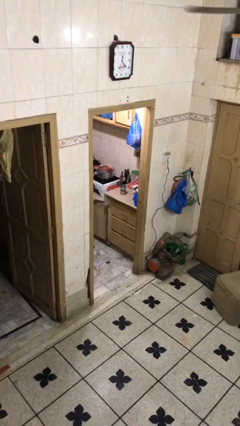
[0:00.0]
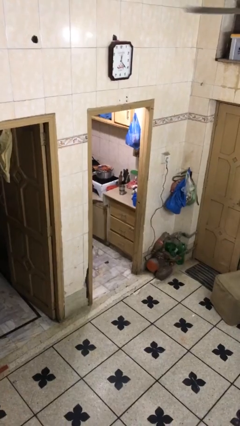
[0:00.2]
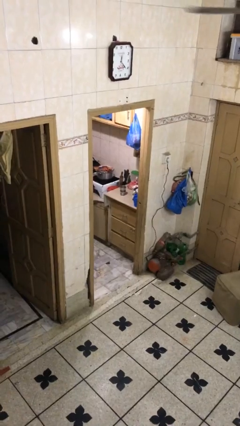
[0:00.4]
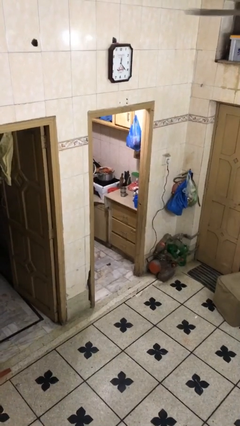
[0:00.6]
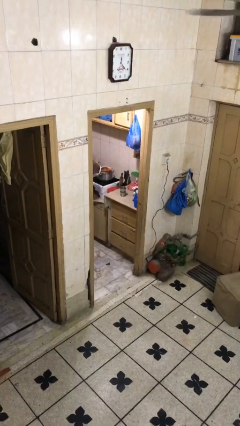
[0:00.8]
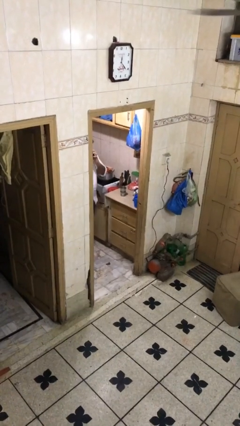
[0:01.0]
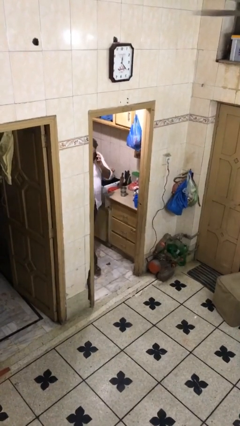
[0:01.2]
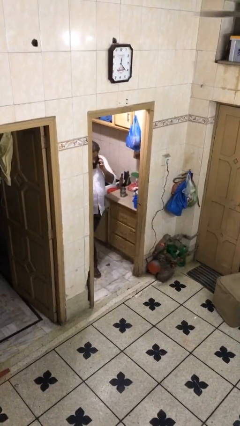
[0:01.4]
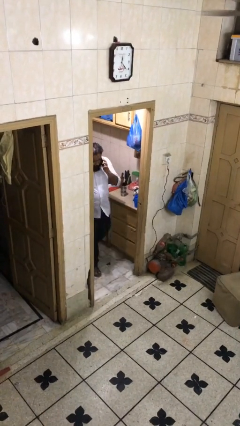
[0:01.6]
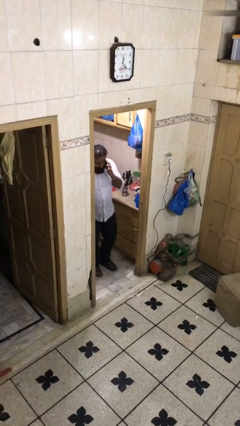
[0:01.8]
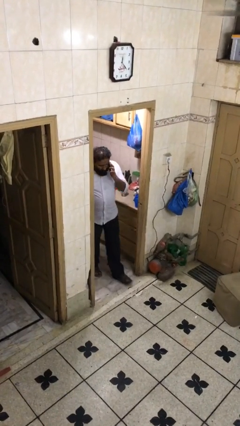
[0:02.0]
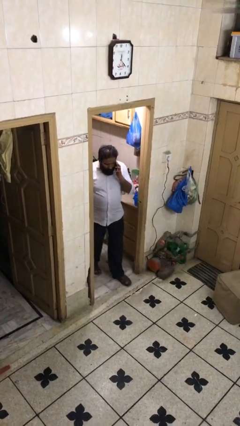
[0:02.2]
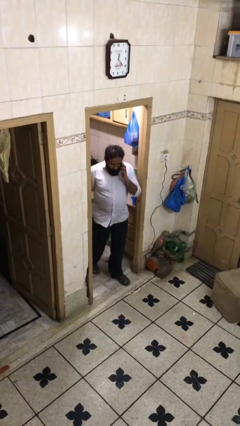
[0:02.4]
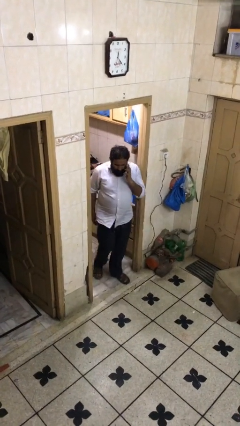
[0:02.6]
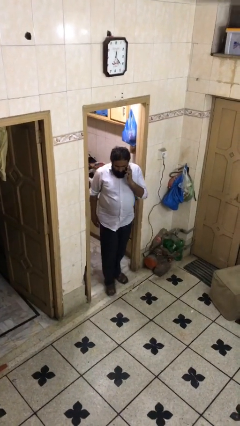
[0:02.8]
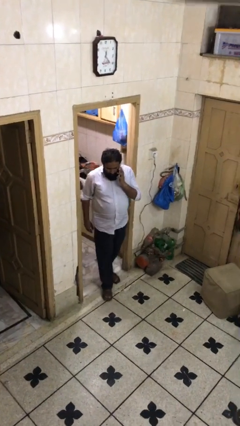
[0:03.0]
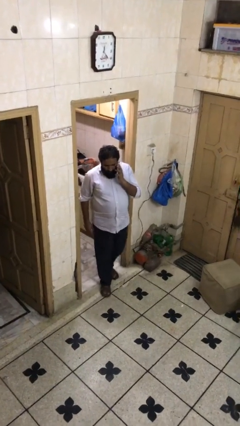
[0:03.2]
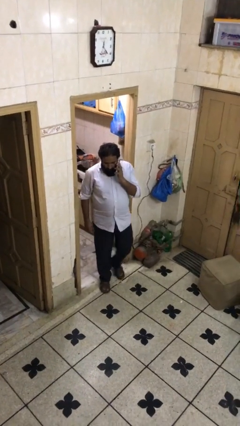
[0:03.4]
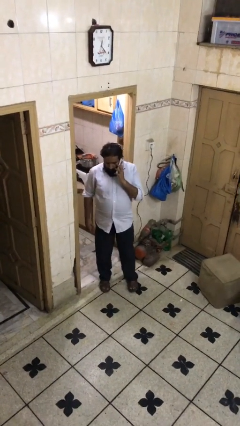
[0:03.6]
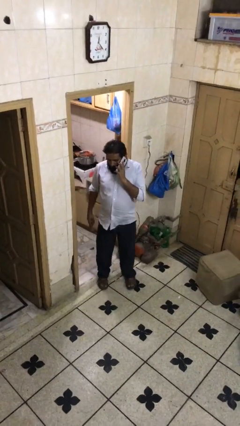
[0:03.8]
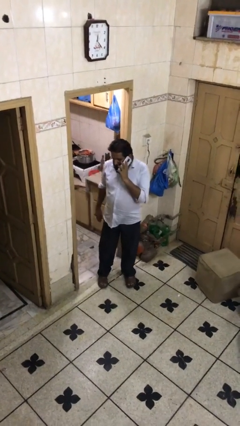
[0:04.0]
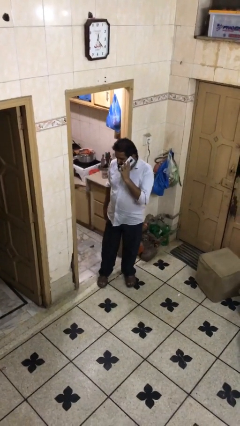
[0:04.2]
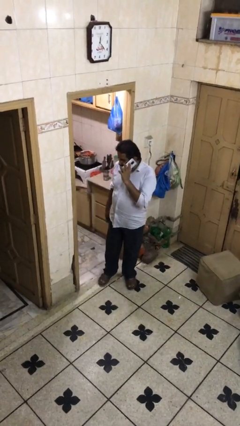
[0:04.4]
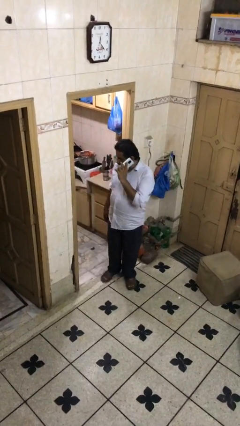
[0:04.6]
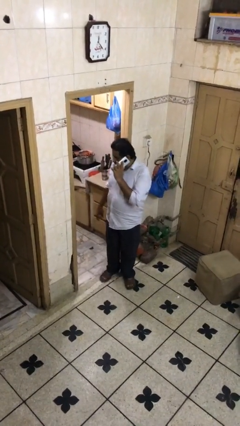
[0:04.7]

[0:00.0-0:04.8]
person enters scene through structure

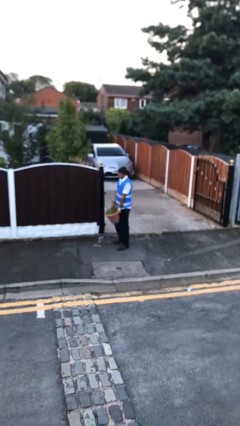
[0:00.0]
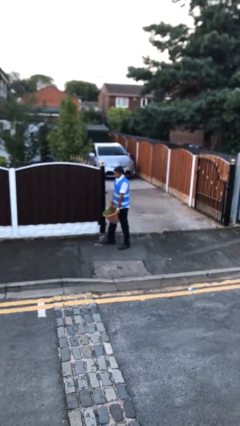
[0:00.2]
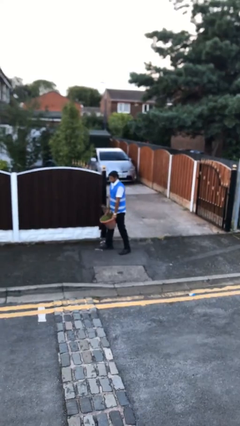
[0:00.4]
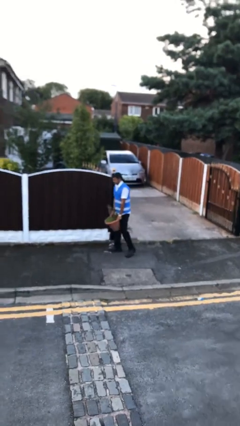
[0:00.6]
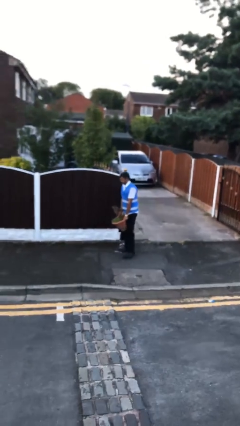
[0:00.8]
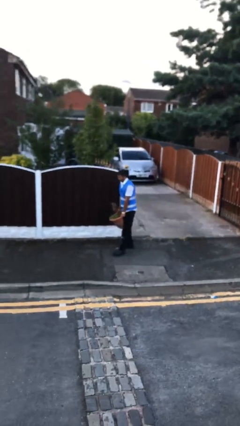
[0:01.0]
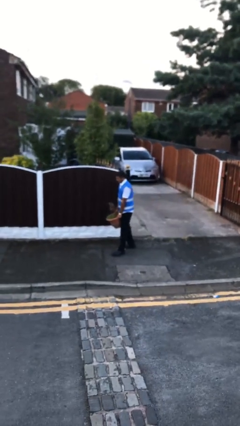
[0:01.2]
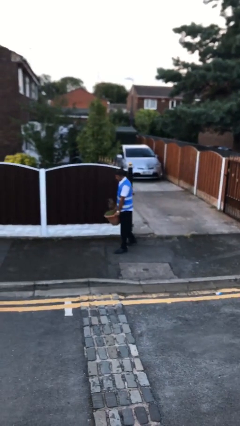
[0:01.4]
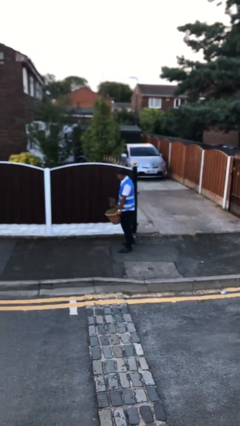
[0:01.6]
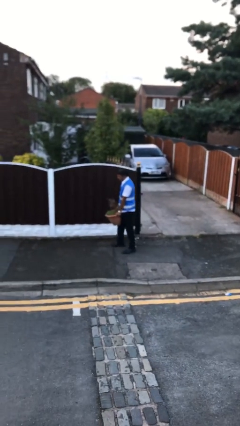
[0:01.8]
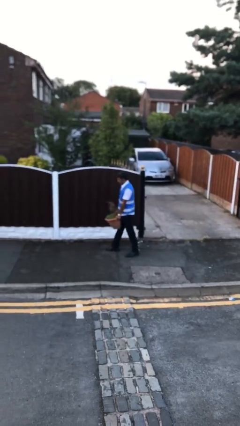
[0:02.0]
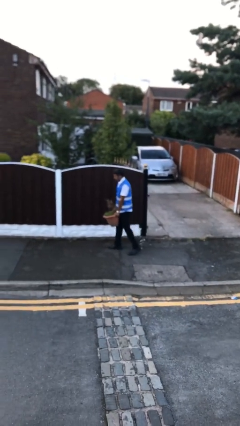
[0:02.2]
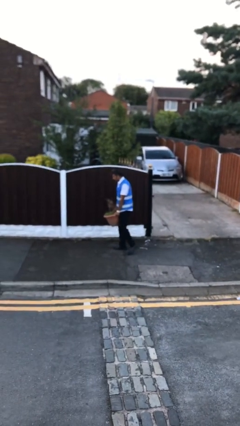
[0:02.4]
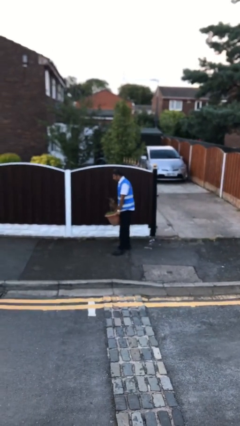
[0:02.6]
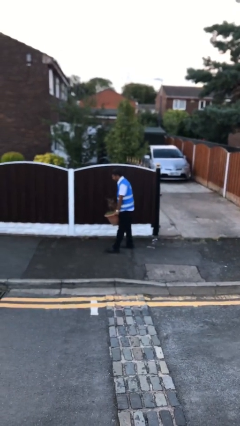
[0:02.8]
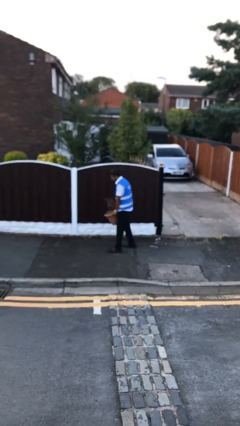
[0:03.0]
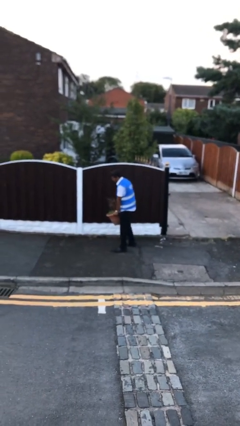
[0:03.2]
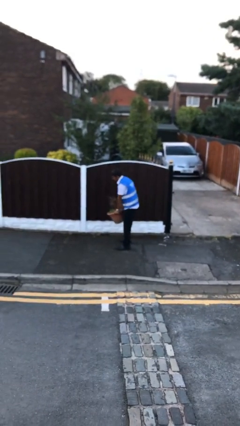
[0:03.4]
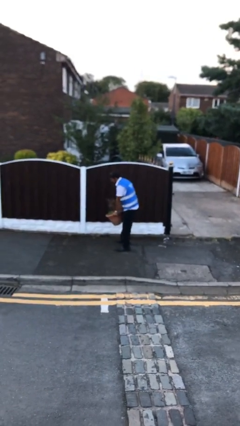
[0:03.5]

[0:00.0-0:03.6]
person carries heavy object

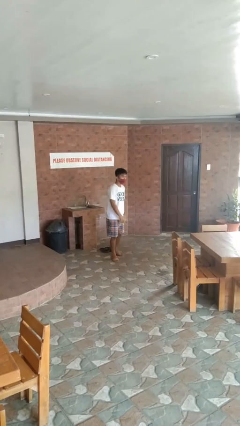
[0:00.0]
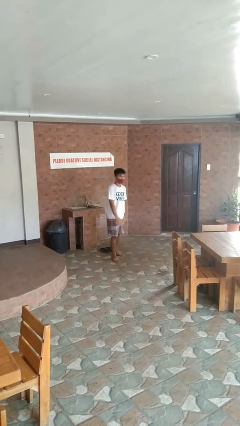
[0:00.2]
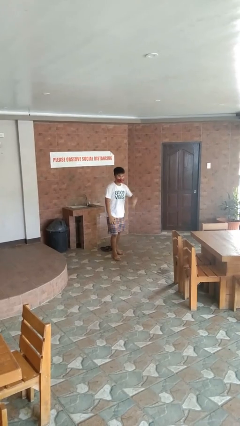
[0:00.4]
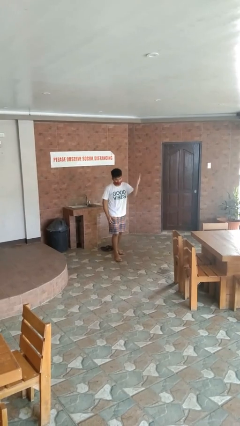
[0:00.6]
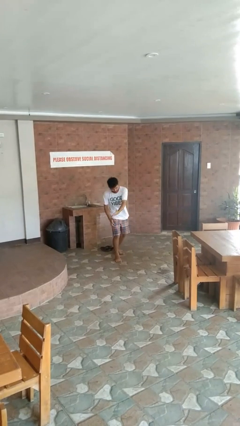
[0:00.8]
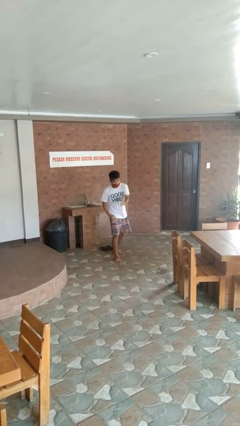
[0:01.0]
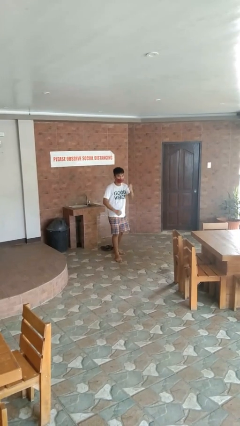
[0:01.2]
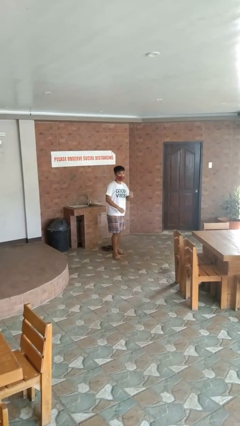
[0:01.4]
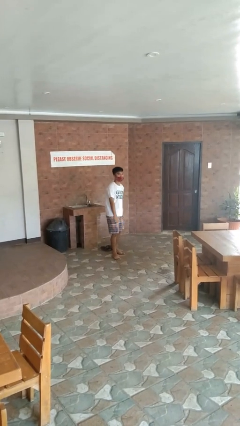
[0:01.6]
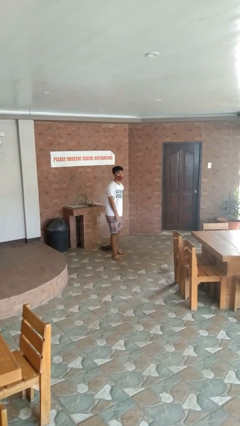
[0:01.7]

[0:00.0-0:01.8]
person karate chop

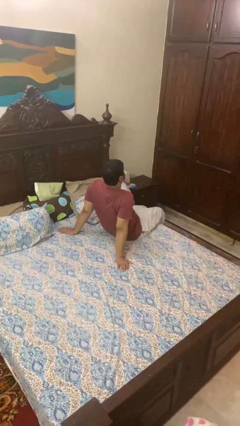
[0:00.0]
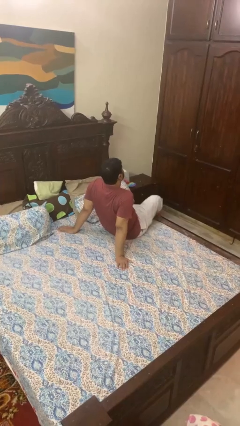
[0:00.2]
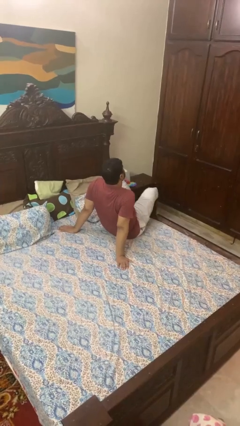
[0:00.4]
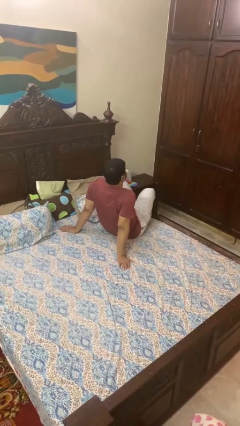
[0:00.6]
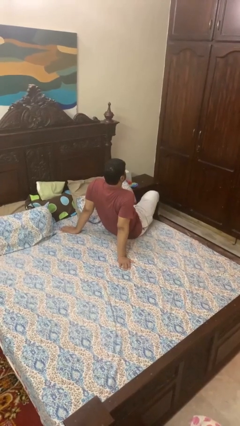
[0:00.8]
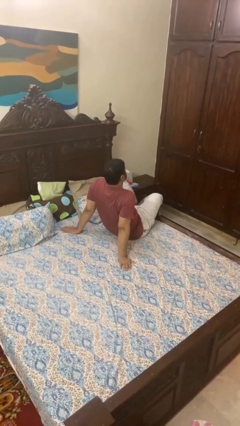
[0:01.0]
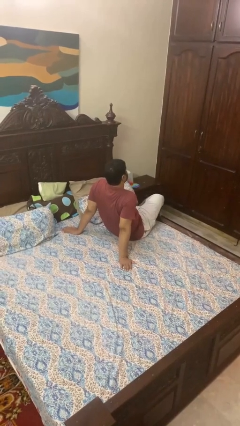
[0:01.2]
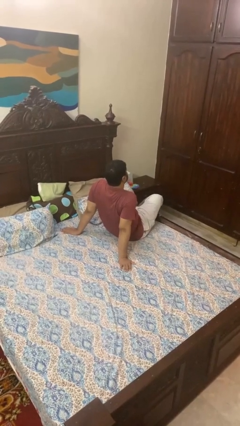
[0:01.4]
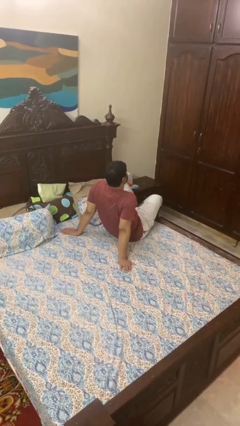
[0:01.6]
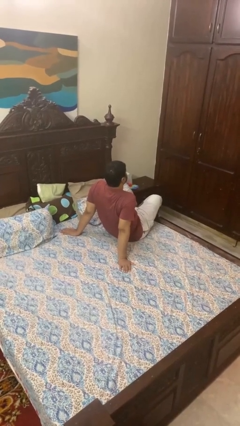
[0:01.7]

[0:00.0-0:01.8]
person crosses legs

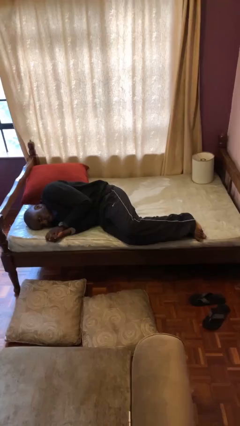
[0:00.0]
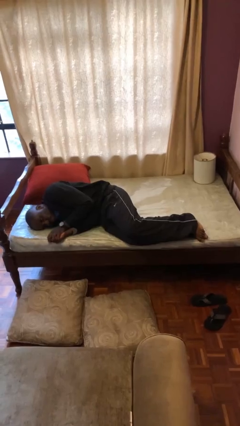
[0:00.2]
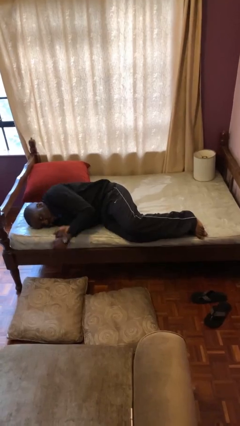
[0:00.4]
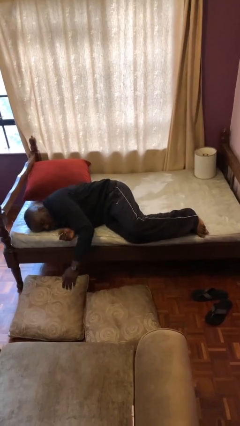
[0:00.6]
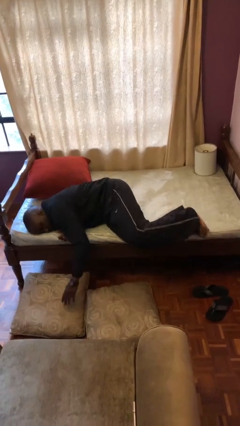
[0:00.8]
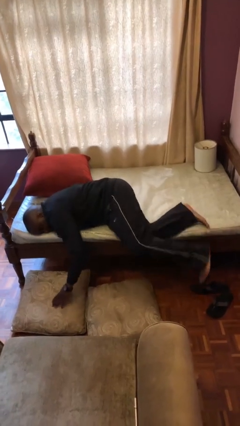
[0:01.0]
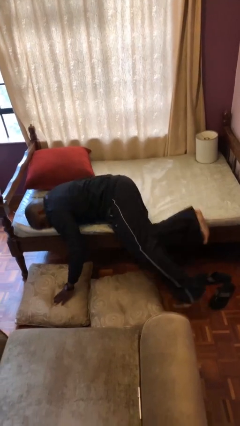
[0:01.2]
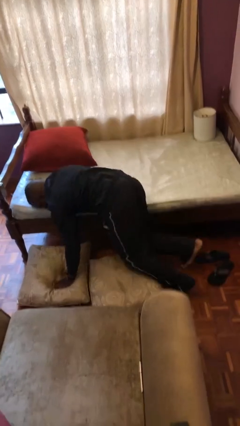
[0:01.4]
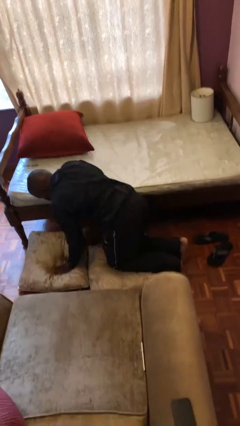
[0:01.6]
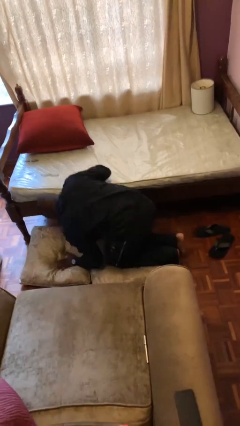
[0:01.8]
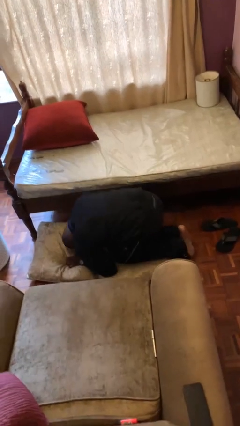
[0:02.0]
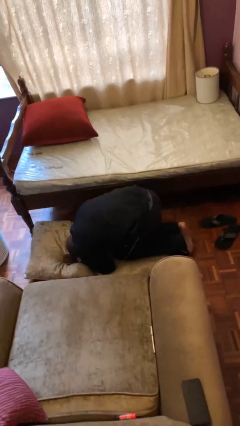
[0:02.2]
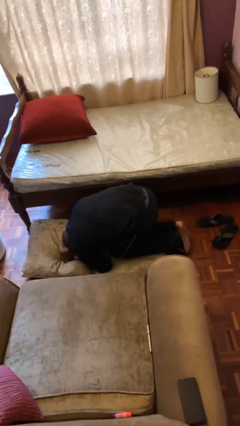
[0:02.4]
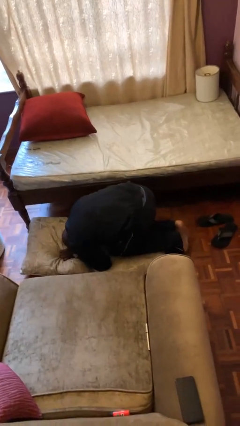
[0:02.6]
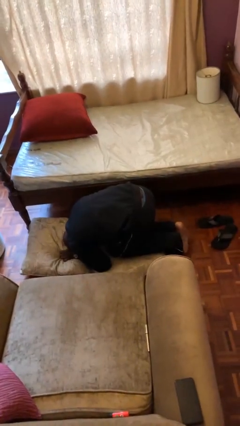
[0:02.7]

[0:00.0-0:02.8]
person falls from bed

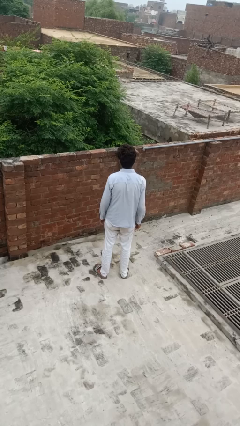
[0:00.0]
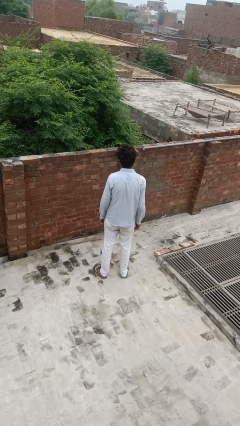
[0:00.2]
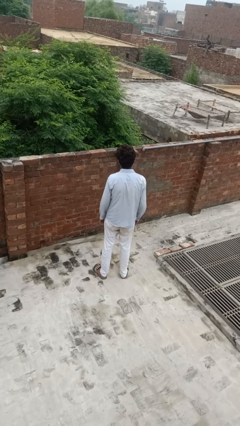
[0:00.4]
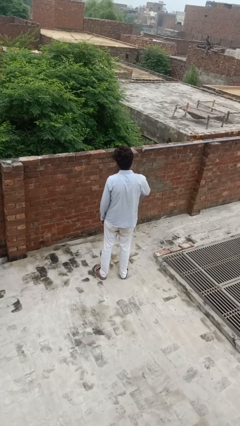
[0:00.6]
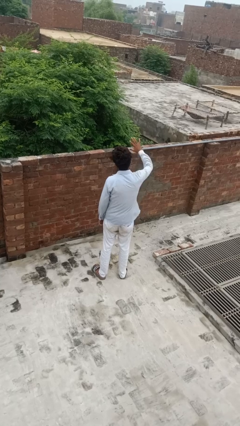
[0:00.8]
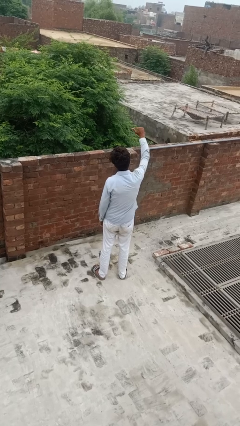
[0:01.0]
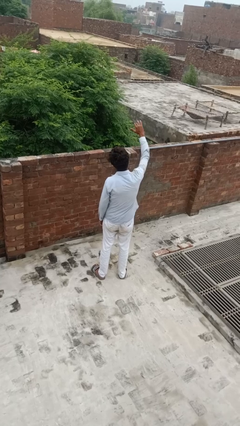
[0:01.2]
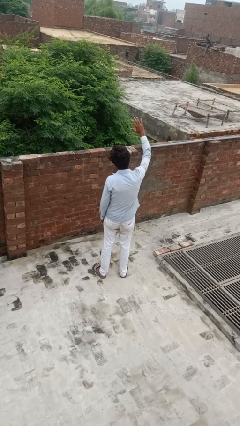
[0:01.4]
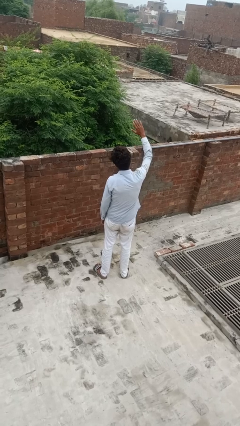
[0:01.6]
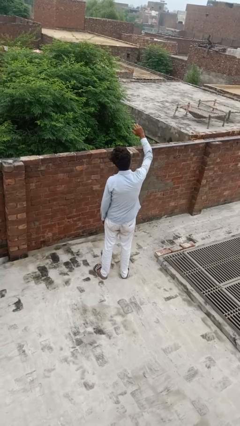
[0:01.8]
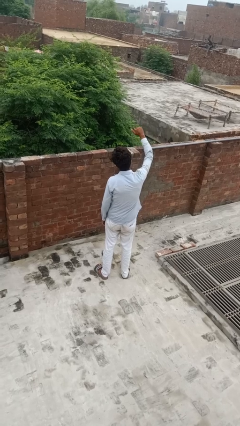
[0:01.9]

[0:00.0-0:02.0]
person gestures come here
